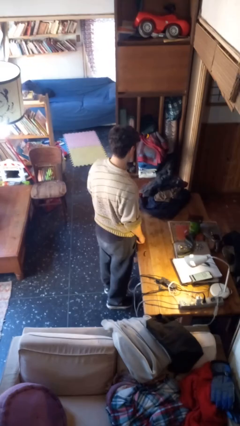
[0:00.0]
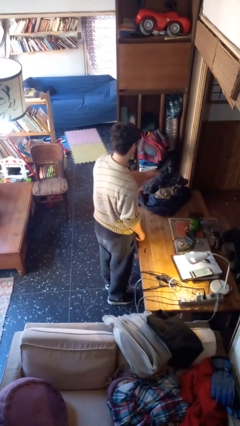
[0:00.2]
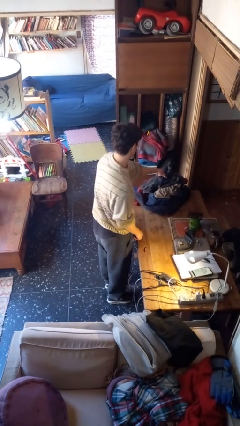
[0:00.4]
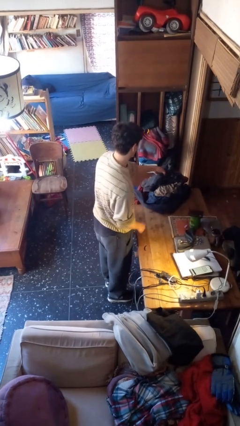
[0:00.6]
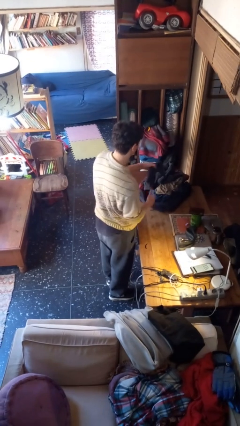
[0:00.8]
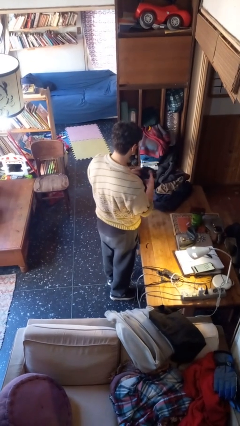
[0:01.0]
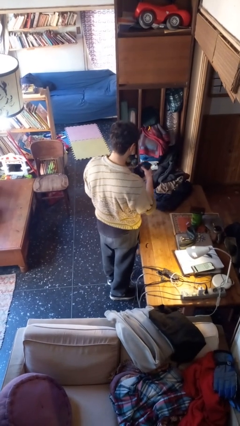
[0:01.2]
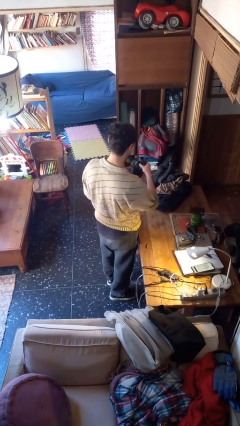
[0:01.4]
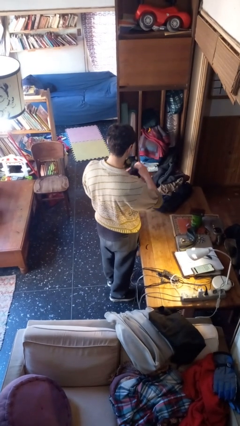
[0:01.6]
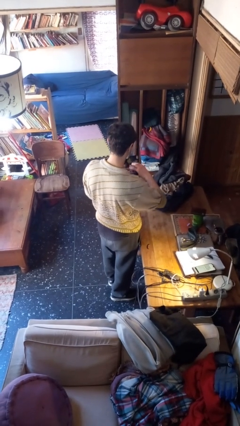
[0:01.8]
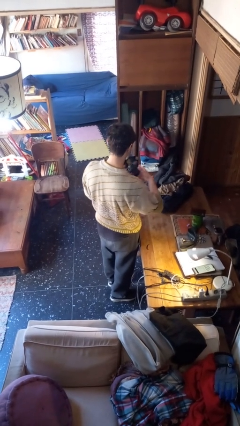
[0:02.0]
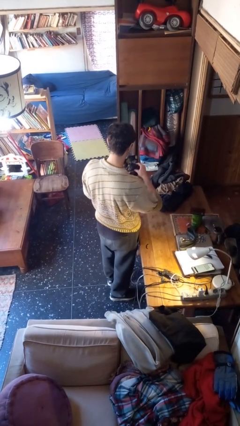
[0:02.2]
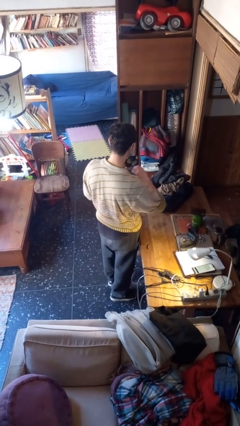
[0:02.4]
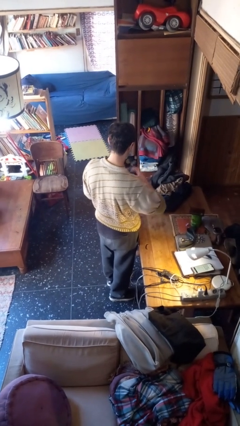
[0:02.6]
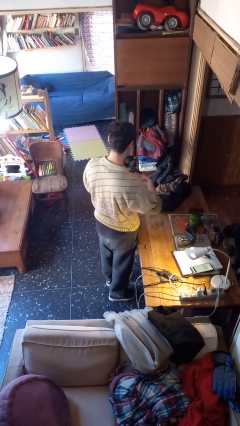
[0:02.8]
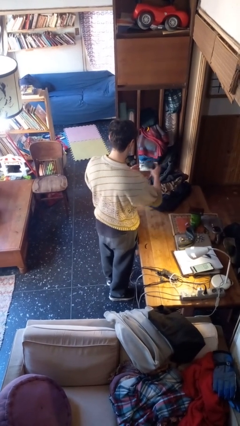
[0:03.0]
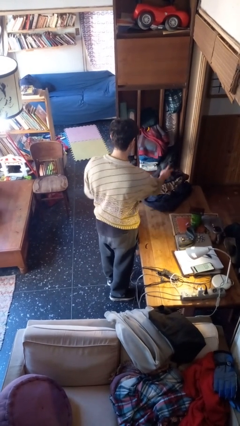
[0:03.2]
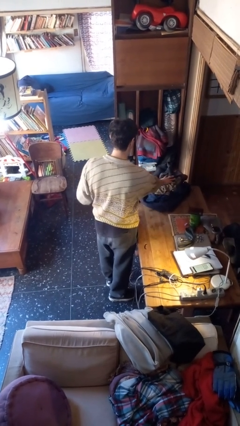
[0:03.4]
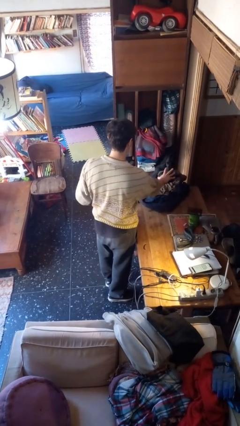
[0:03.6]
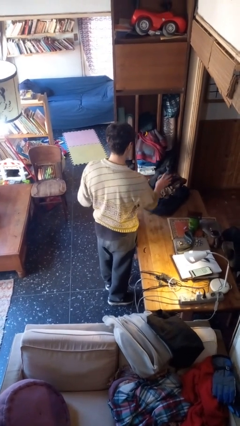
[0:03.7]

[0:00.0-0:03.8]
person folds socks

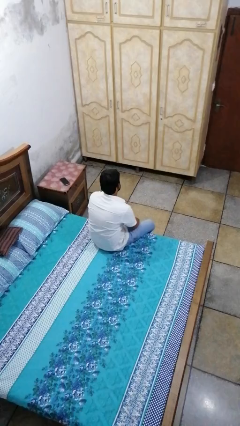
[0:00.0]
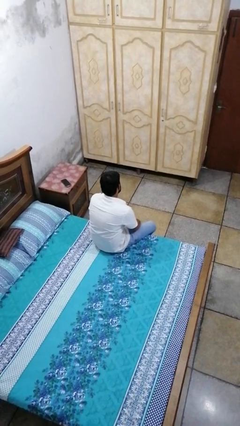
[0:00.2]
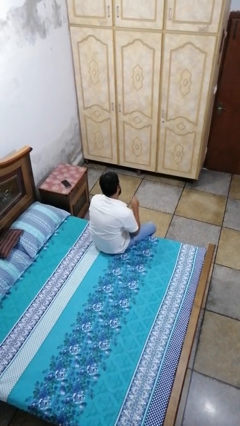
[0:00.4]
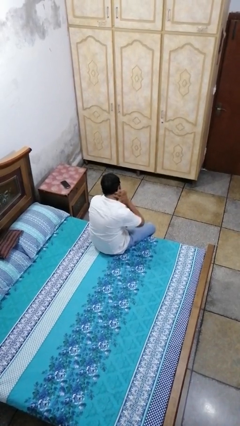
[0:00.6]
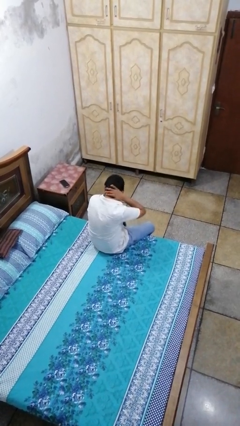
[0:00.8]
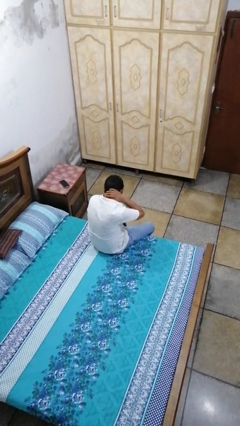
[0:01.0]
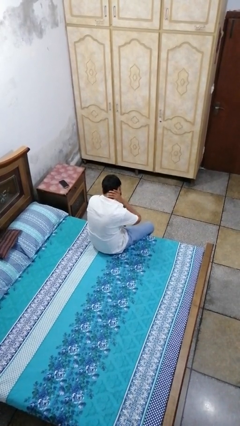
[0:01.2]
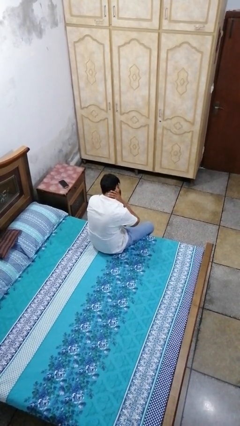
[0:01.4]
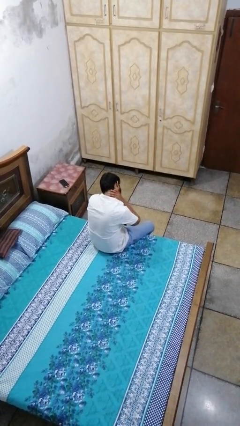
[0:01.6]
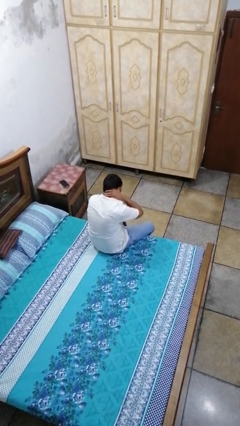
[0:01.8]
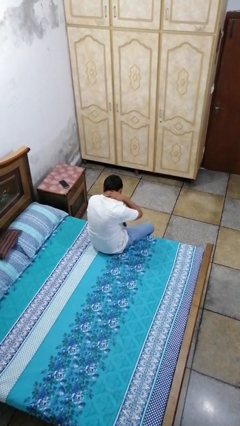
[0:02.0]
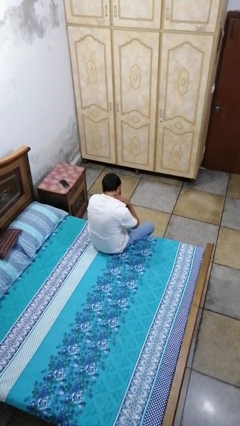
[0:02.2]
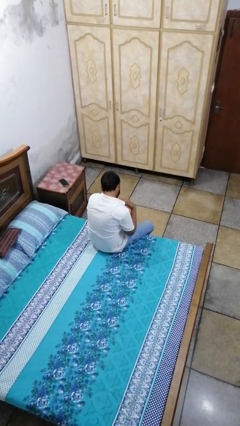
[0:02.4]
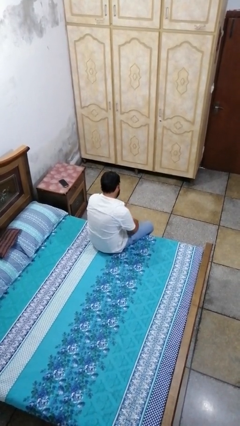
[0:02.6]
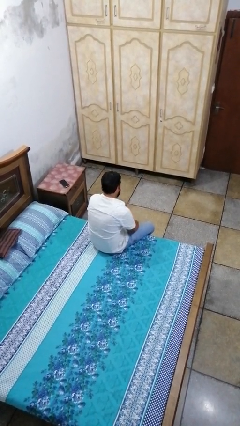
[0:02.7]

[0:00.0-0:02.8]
person rubs neck

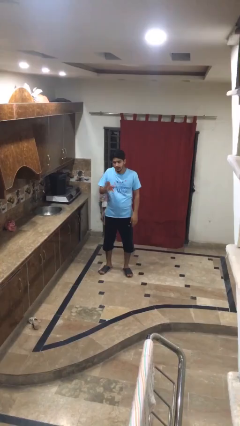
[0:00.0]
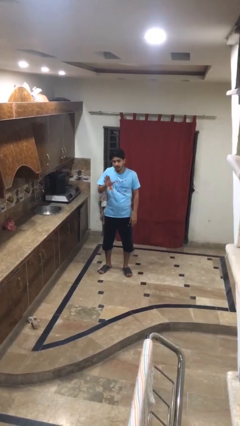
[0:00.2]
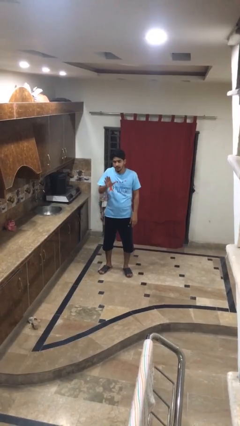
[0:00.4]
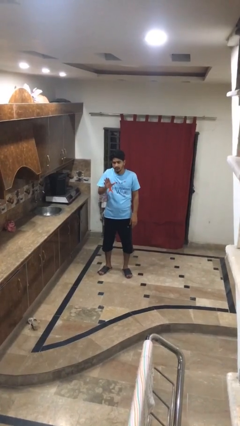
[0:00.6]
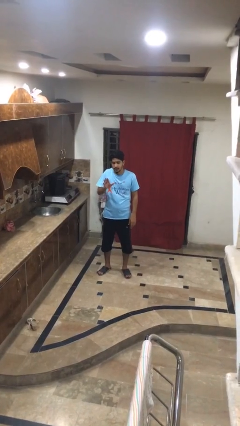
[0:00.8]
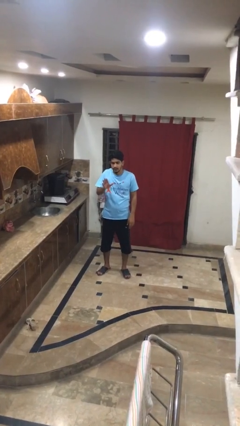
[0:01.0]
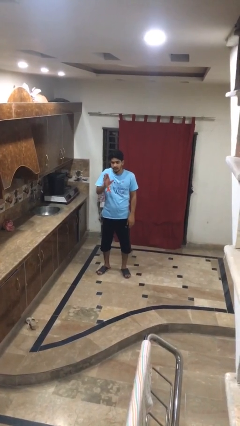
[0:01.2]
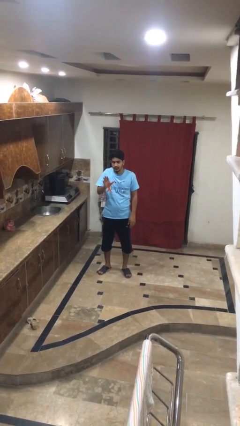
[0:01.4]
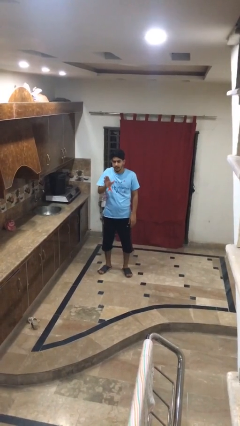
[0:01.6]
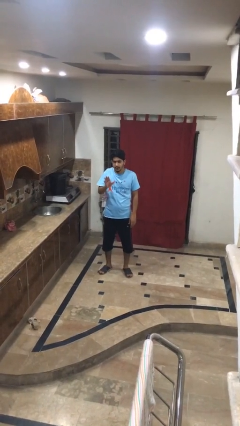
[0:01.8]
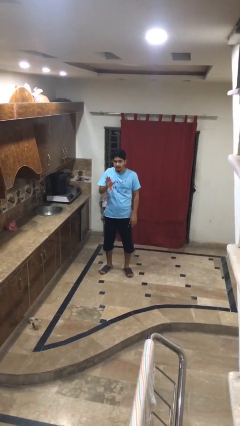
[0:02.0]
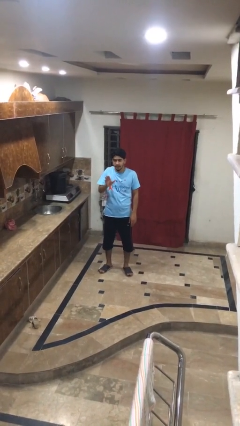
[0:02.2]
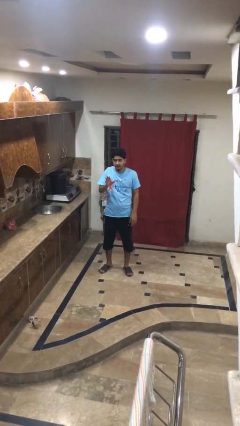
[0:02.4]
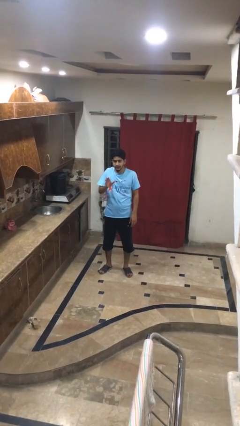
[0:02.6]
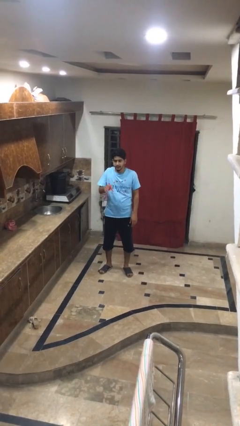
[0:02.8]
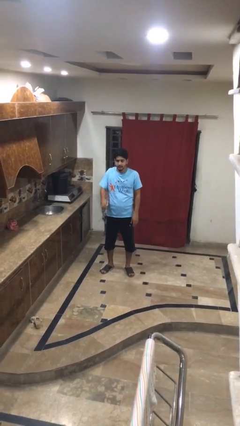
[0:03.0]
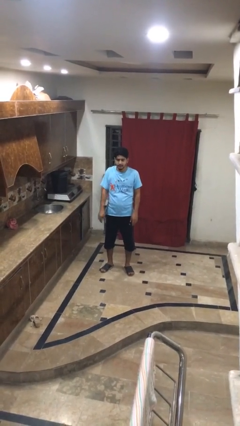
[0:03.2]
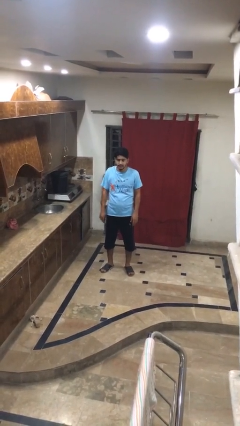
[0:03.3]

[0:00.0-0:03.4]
person shrugs

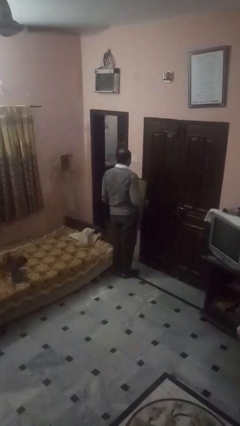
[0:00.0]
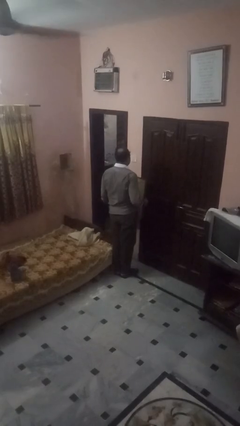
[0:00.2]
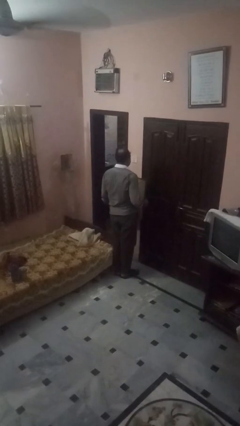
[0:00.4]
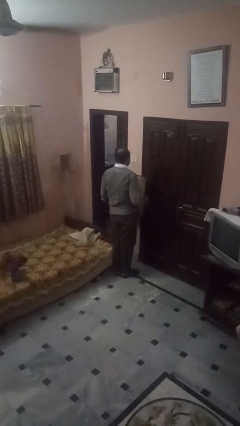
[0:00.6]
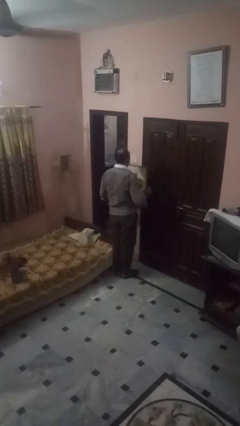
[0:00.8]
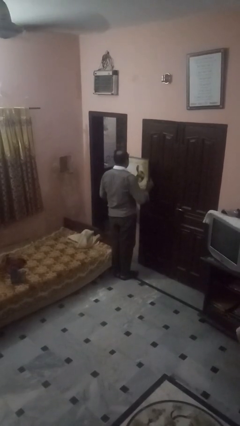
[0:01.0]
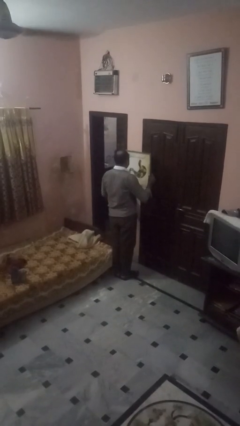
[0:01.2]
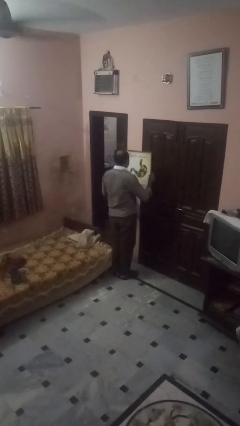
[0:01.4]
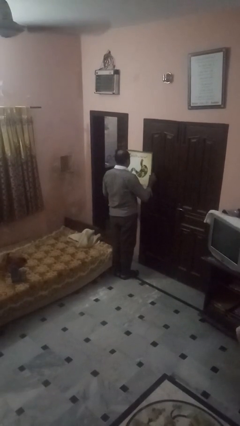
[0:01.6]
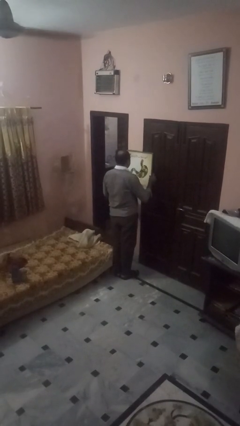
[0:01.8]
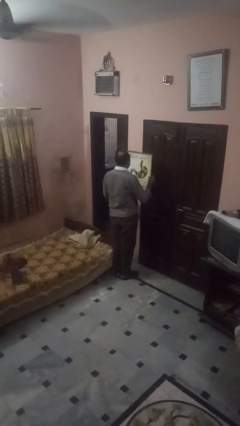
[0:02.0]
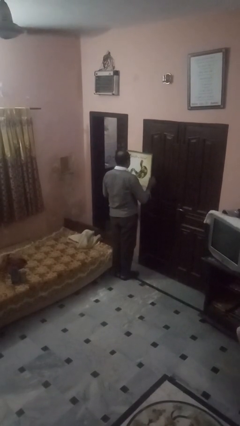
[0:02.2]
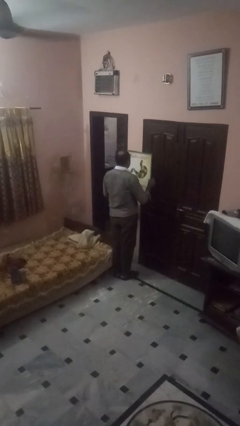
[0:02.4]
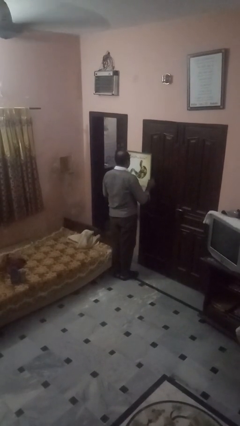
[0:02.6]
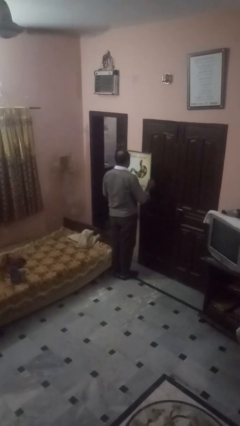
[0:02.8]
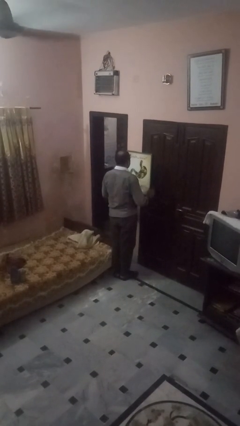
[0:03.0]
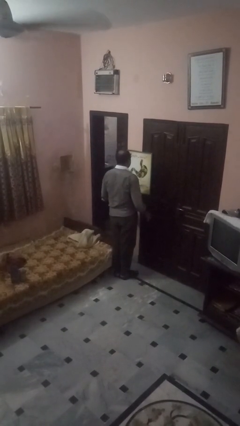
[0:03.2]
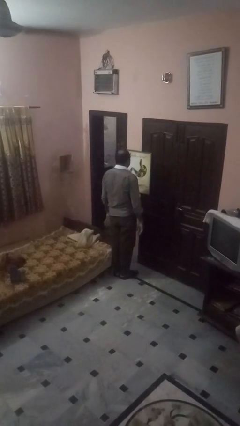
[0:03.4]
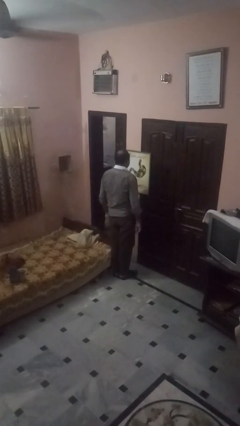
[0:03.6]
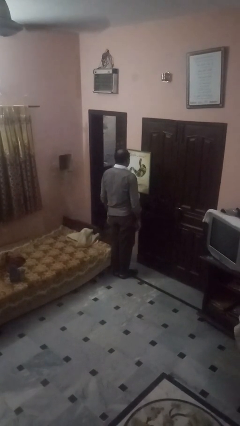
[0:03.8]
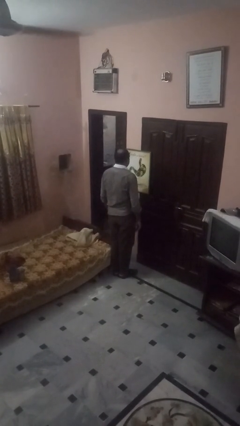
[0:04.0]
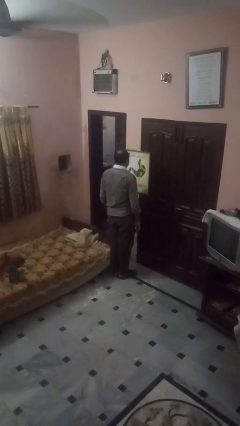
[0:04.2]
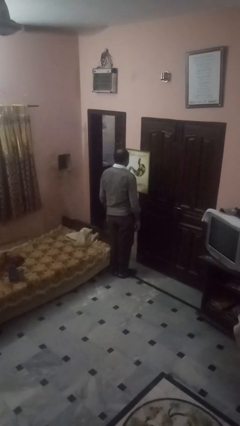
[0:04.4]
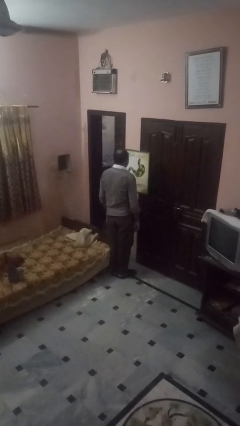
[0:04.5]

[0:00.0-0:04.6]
person puts up picture frame

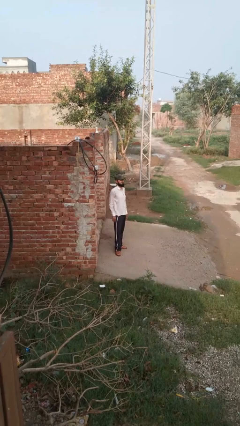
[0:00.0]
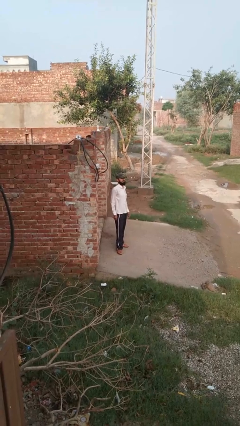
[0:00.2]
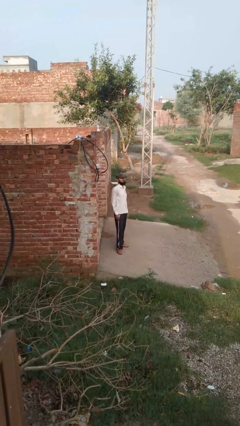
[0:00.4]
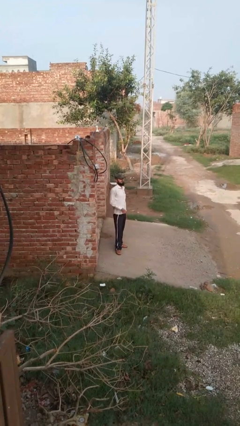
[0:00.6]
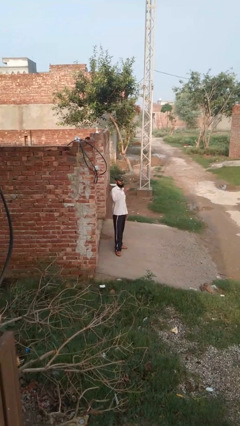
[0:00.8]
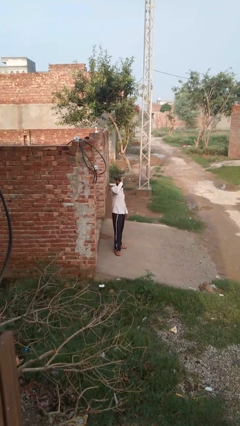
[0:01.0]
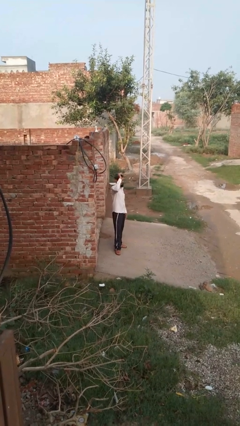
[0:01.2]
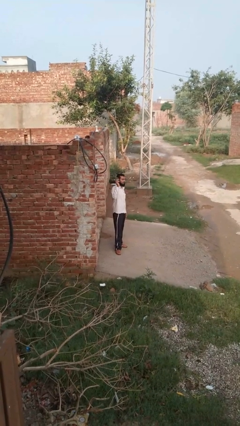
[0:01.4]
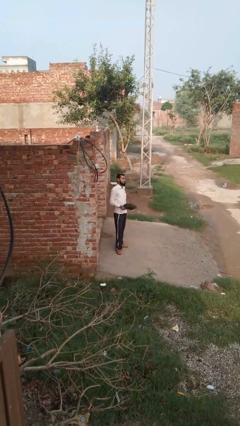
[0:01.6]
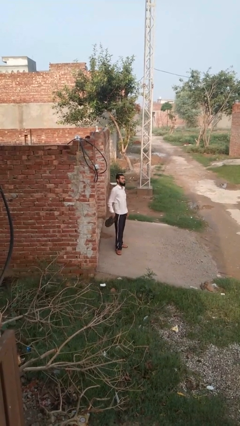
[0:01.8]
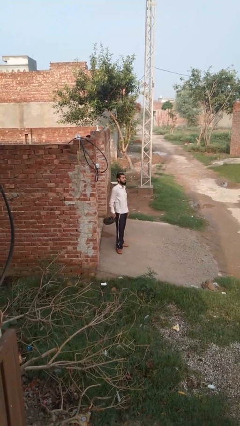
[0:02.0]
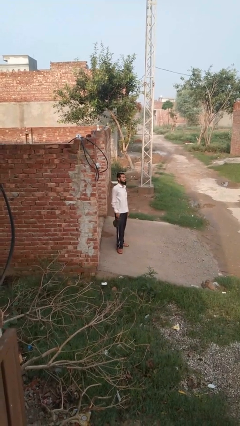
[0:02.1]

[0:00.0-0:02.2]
person takes off hat

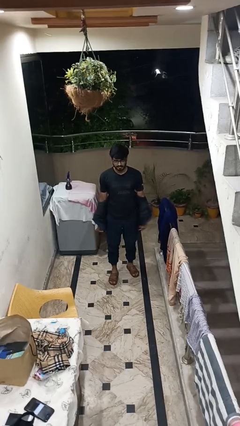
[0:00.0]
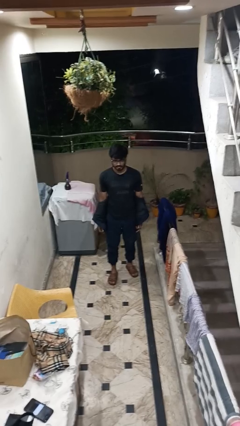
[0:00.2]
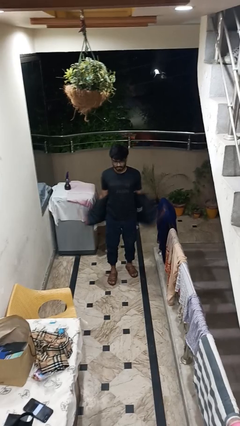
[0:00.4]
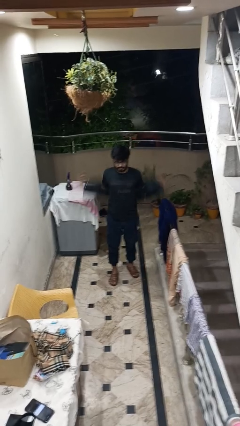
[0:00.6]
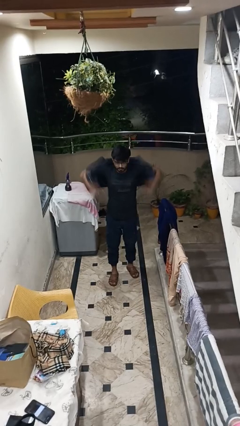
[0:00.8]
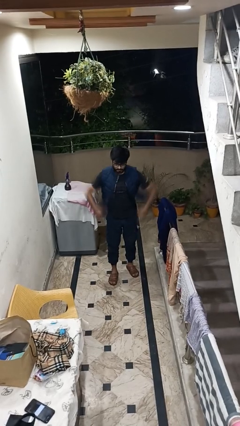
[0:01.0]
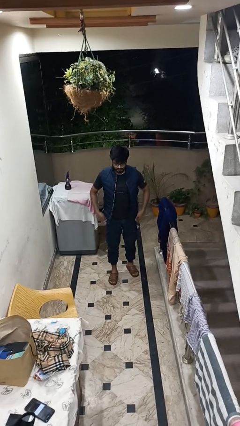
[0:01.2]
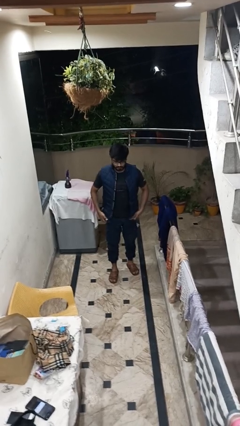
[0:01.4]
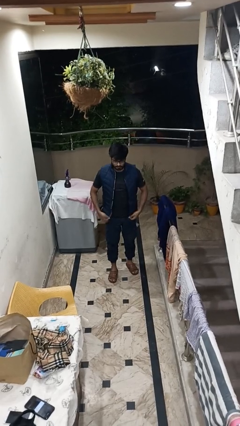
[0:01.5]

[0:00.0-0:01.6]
person puts on jacket
